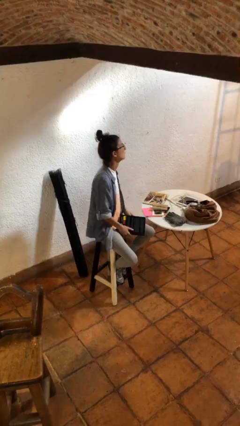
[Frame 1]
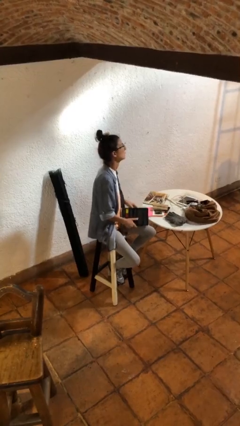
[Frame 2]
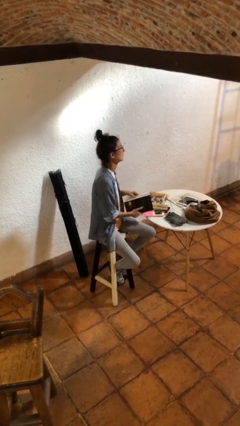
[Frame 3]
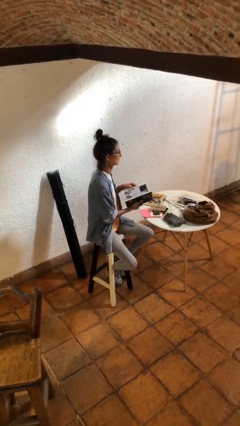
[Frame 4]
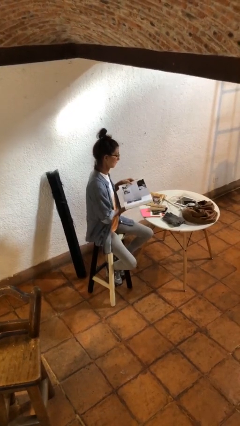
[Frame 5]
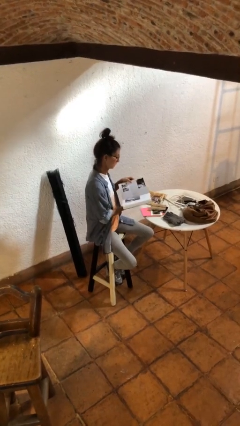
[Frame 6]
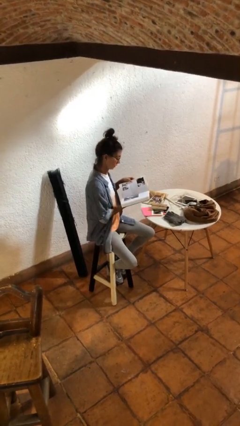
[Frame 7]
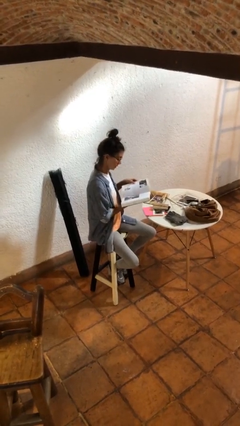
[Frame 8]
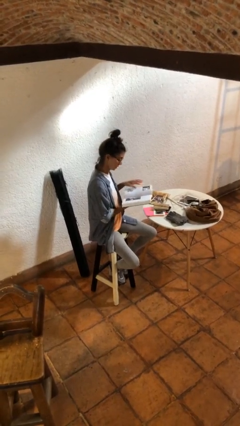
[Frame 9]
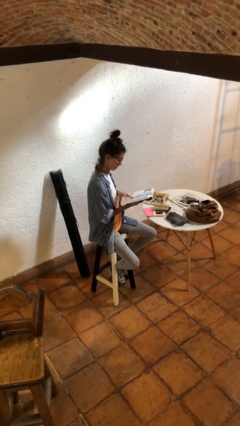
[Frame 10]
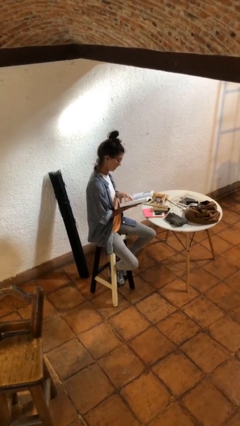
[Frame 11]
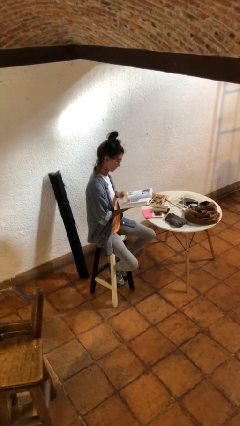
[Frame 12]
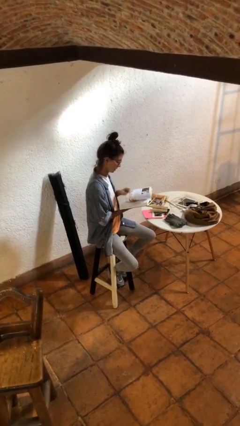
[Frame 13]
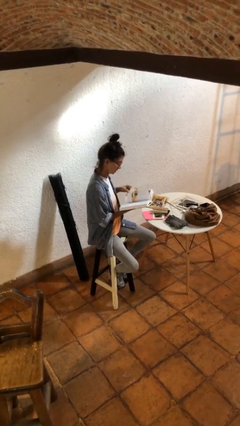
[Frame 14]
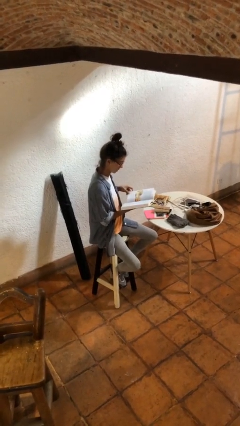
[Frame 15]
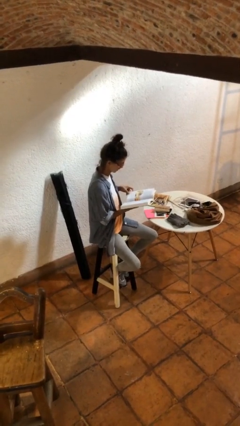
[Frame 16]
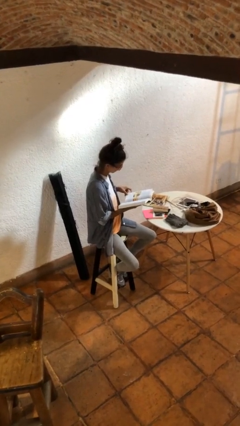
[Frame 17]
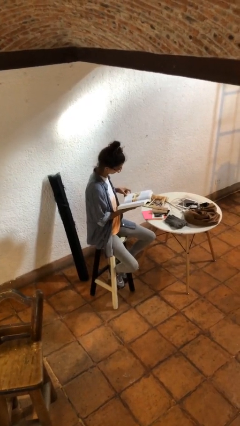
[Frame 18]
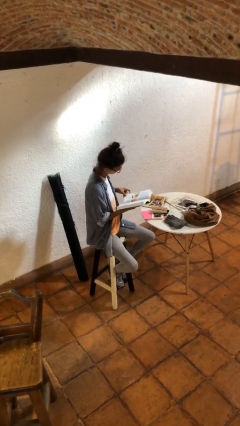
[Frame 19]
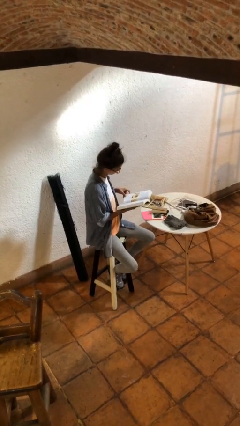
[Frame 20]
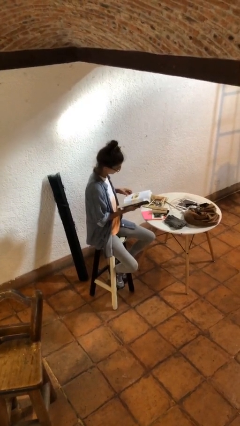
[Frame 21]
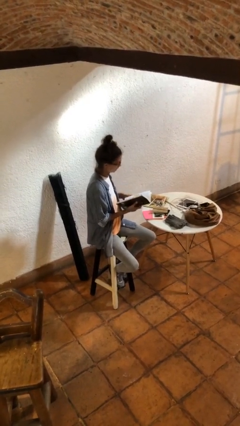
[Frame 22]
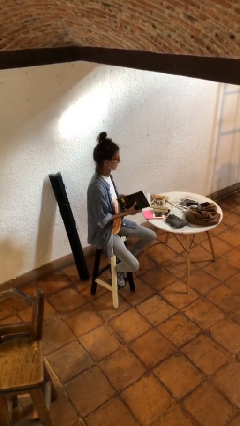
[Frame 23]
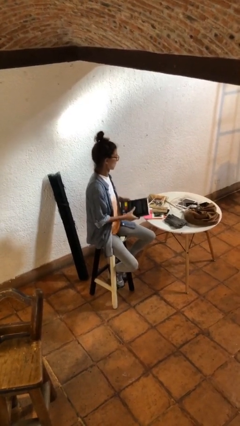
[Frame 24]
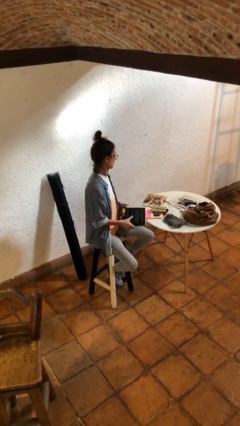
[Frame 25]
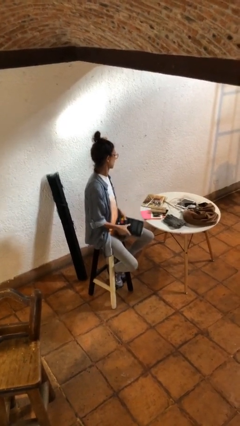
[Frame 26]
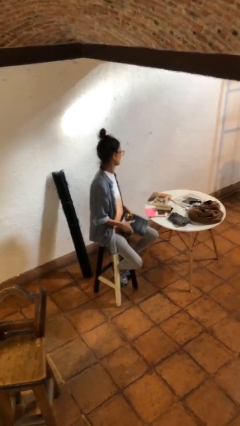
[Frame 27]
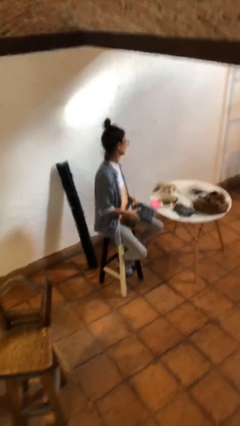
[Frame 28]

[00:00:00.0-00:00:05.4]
person reads book

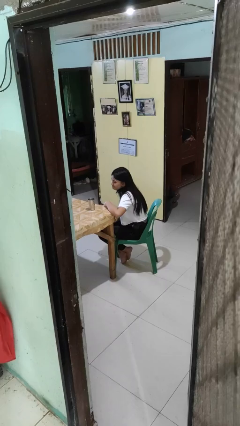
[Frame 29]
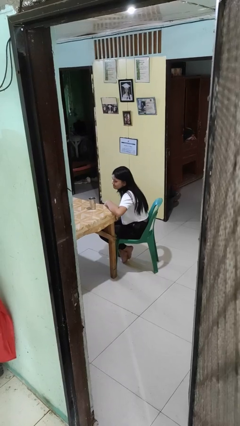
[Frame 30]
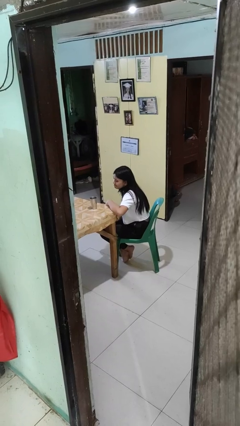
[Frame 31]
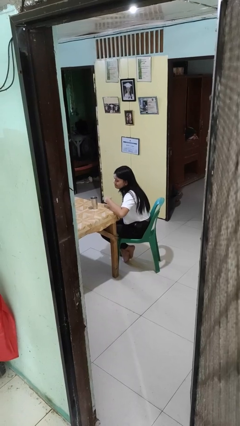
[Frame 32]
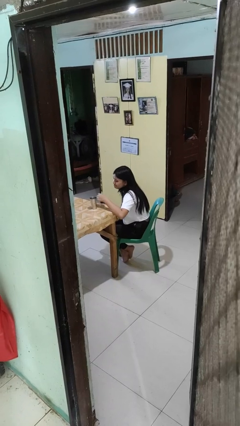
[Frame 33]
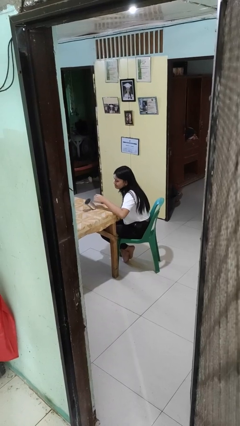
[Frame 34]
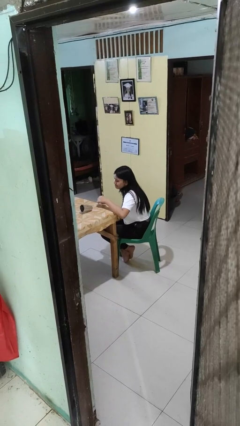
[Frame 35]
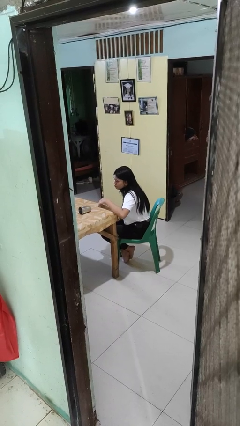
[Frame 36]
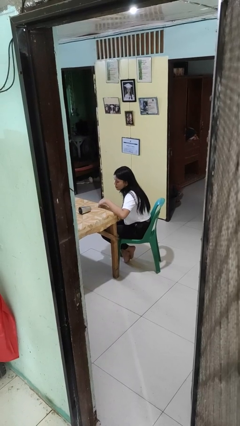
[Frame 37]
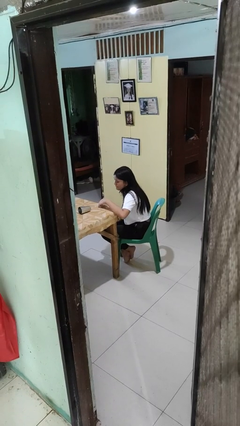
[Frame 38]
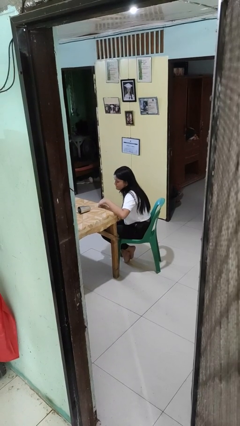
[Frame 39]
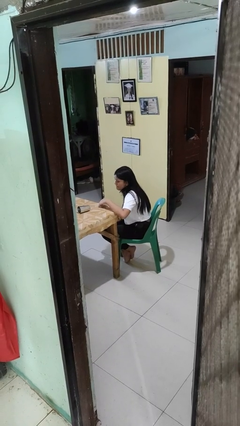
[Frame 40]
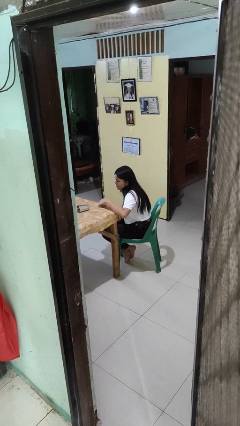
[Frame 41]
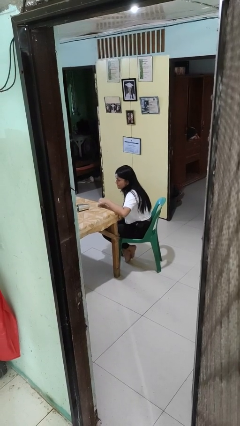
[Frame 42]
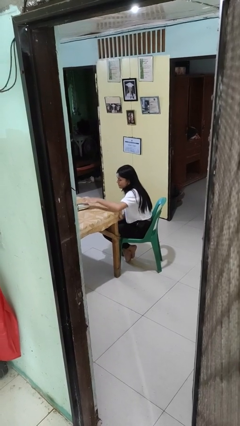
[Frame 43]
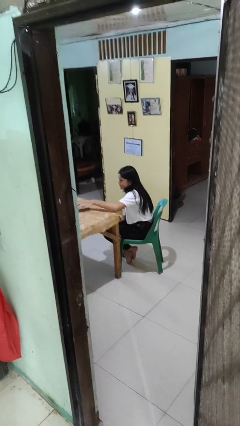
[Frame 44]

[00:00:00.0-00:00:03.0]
person knocks over glass

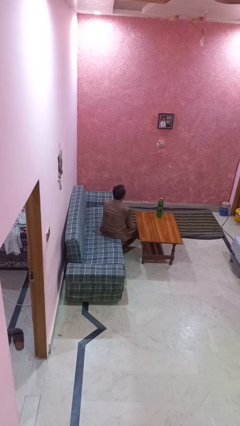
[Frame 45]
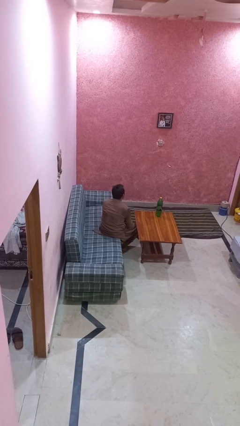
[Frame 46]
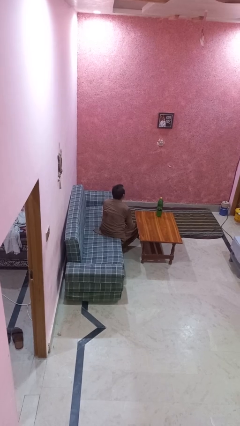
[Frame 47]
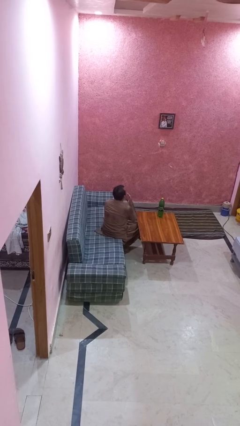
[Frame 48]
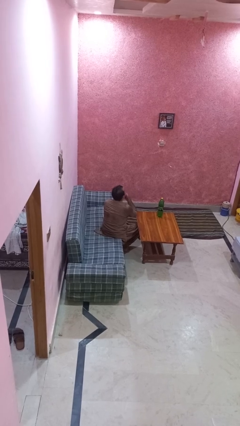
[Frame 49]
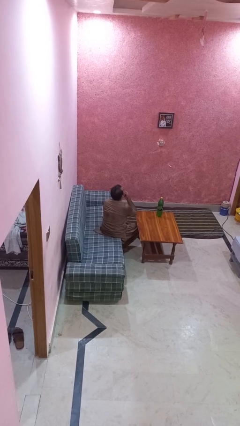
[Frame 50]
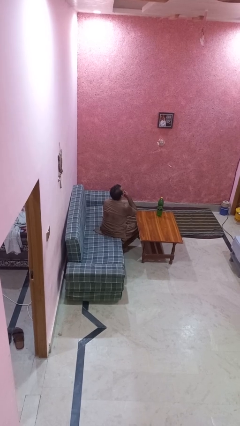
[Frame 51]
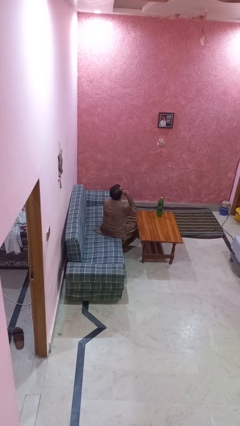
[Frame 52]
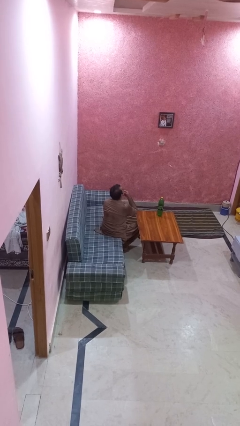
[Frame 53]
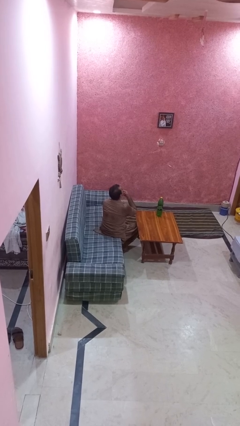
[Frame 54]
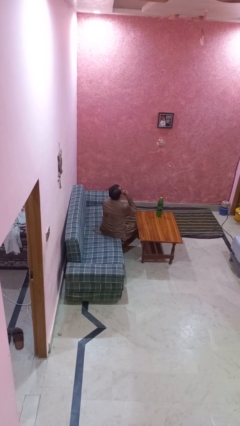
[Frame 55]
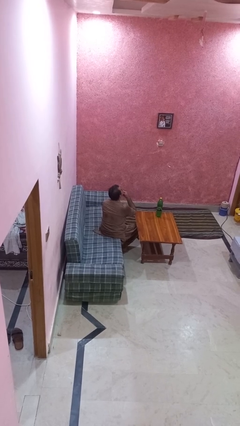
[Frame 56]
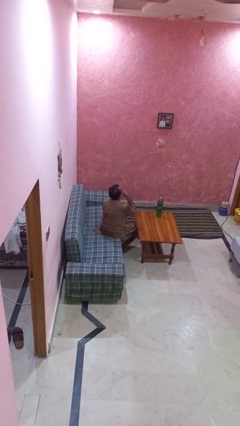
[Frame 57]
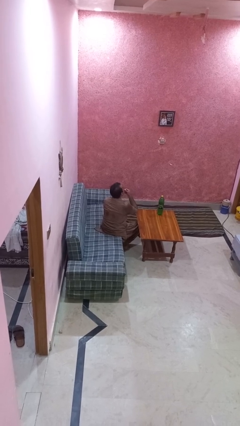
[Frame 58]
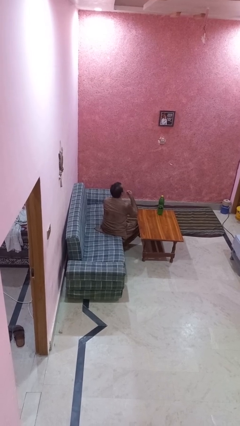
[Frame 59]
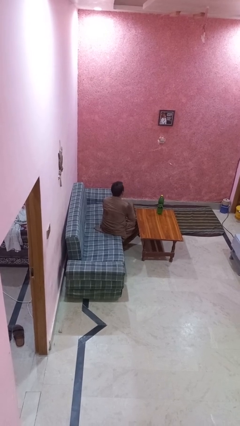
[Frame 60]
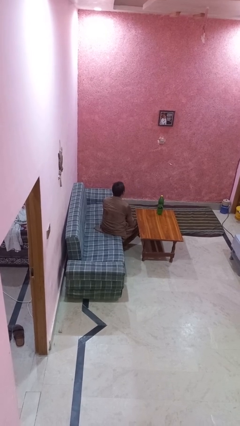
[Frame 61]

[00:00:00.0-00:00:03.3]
person strokes chin

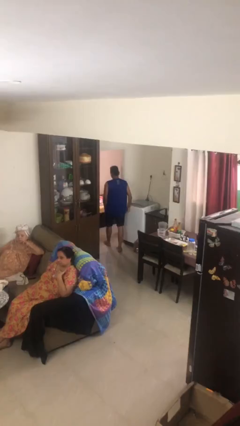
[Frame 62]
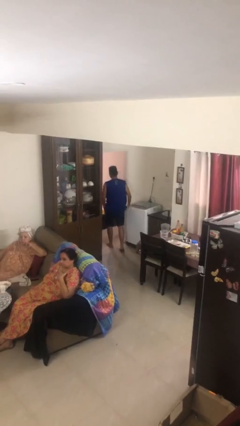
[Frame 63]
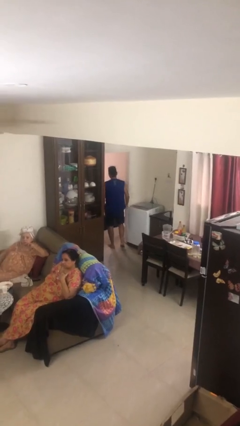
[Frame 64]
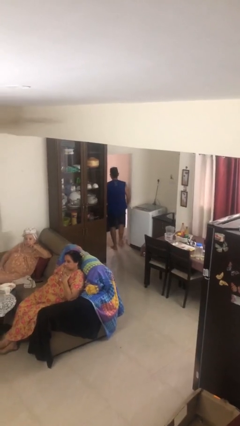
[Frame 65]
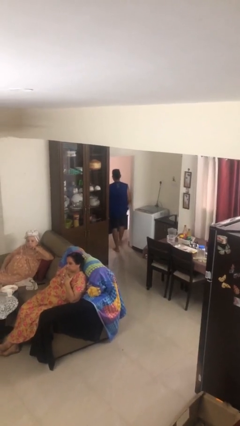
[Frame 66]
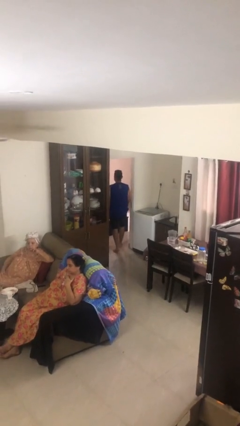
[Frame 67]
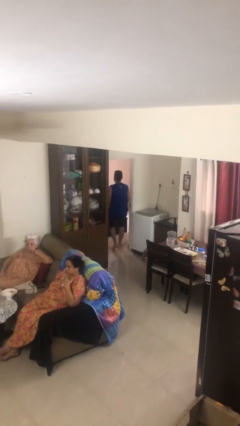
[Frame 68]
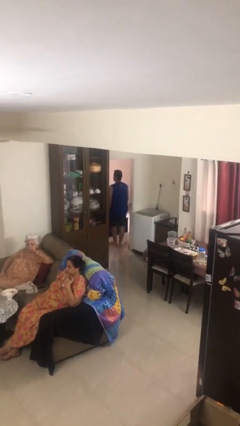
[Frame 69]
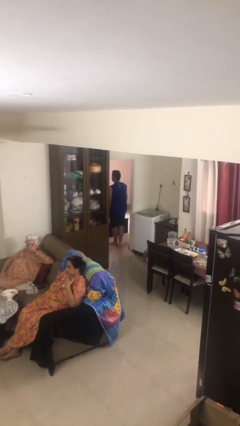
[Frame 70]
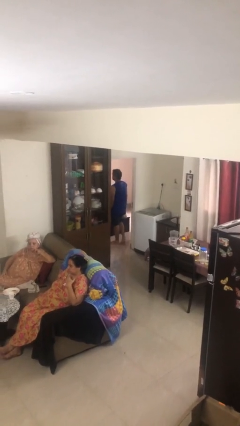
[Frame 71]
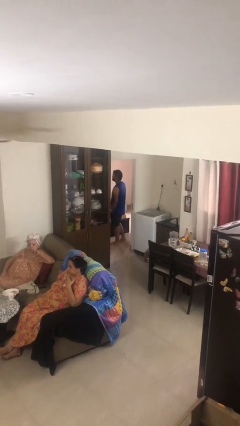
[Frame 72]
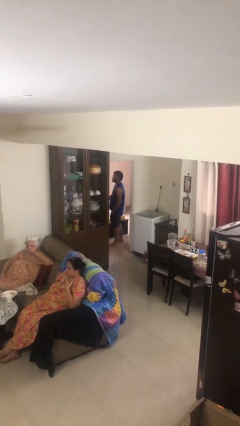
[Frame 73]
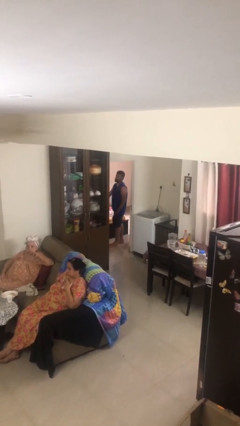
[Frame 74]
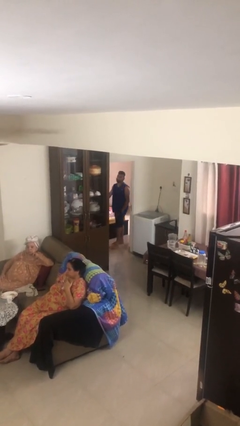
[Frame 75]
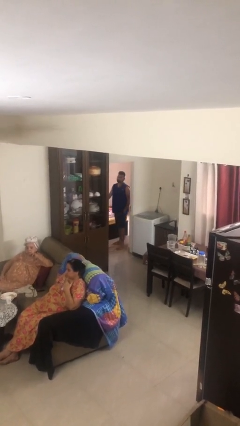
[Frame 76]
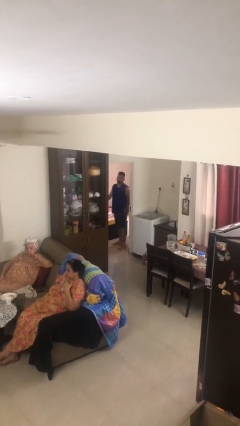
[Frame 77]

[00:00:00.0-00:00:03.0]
person exits scene through structure

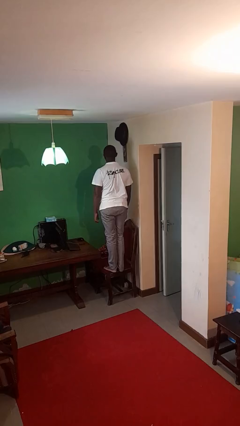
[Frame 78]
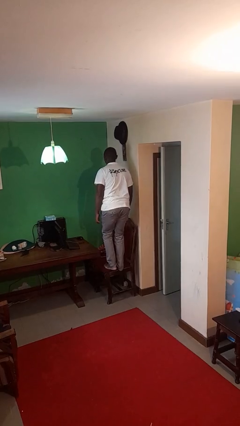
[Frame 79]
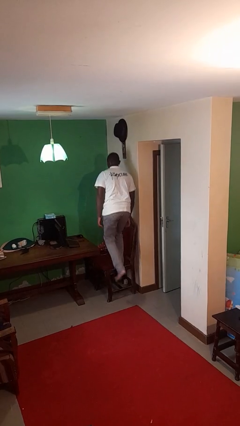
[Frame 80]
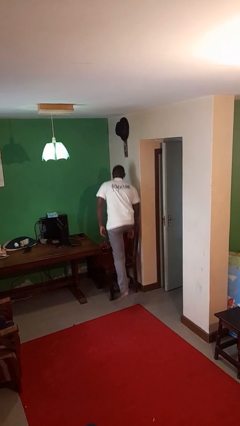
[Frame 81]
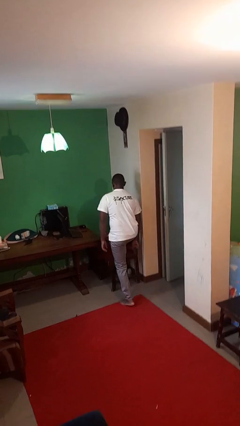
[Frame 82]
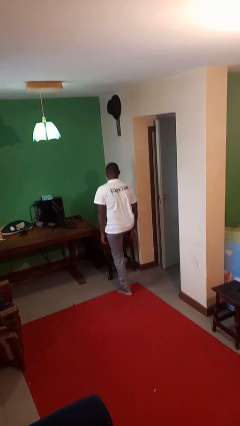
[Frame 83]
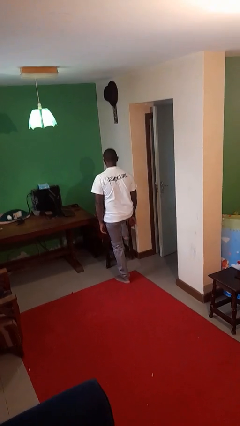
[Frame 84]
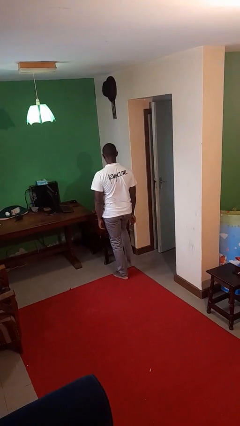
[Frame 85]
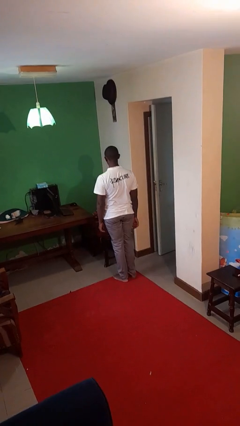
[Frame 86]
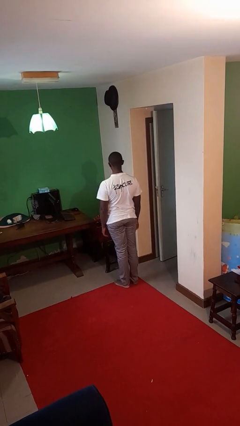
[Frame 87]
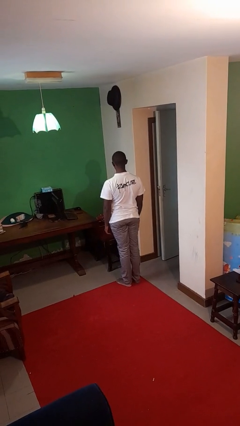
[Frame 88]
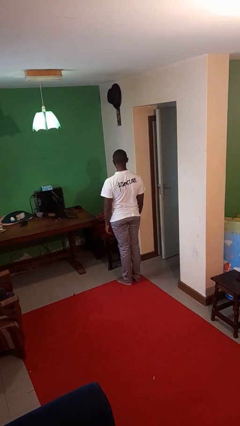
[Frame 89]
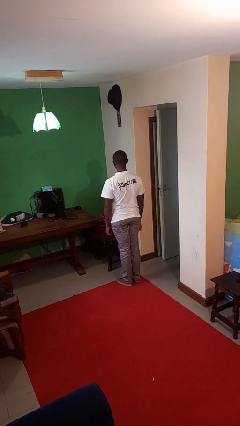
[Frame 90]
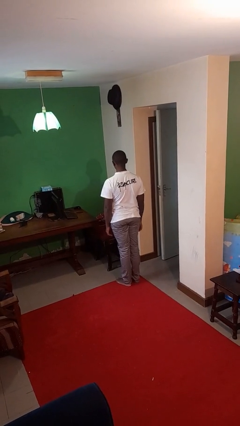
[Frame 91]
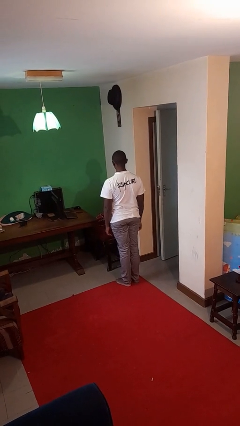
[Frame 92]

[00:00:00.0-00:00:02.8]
person climbs off chair

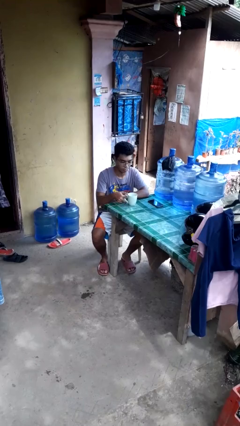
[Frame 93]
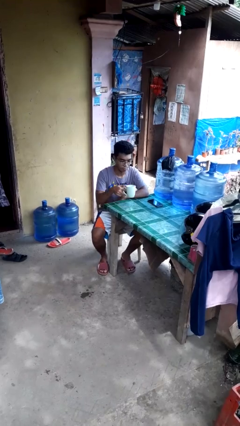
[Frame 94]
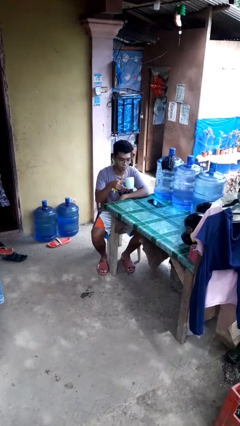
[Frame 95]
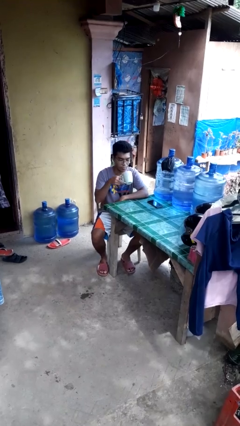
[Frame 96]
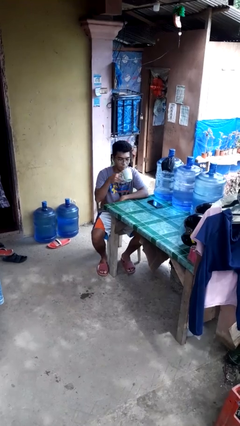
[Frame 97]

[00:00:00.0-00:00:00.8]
person picks up object from table
